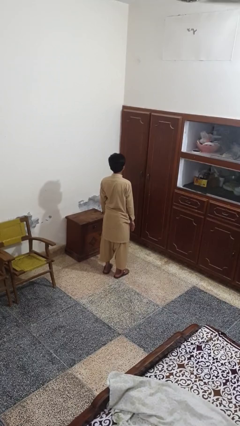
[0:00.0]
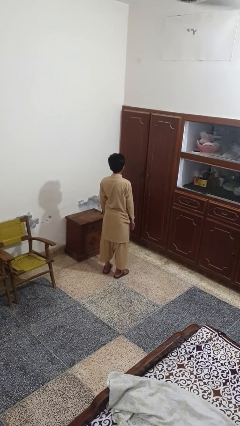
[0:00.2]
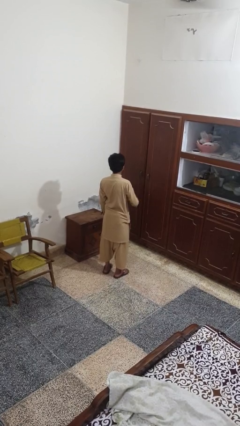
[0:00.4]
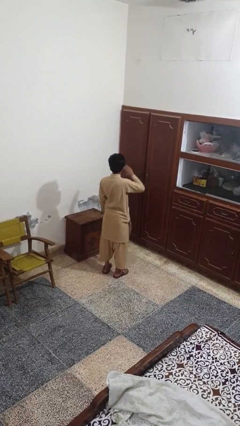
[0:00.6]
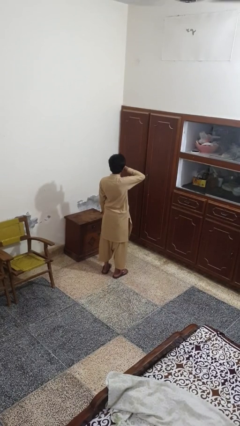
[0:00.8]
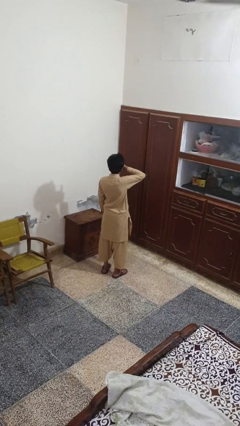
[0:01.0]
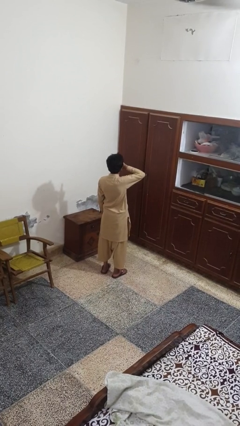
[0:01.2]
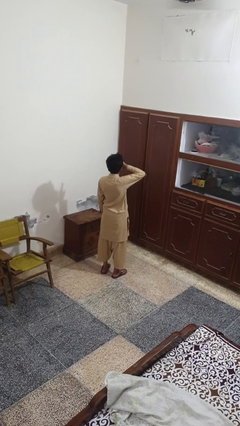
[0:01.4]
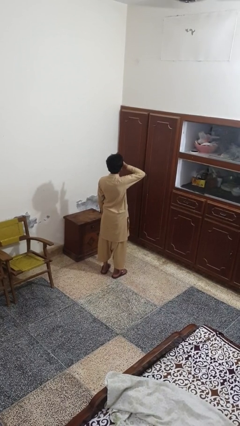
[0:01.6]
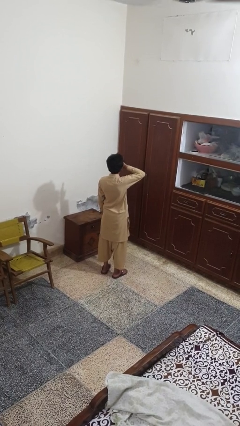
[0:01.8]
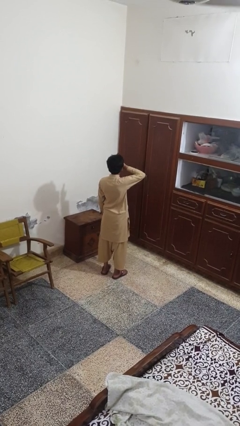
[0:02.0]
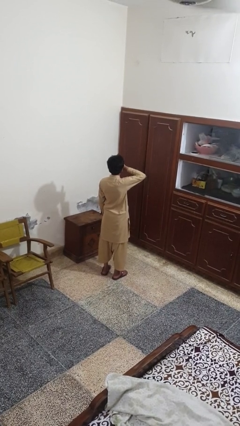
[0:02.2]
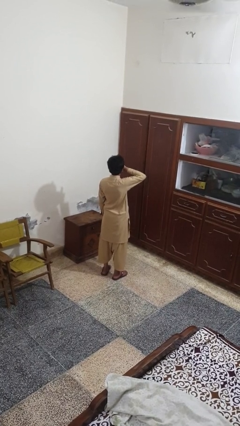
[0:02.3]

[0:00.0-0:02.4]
person yawns

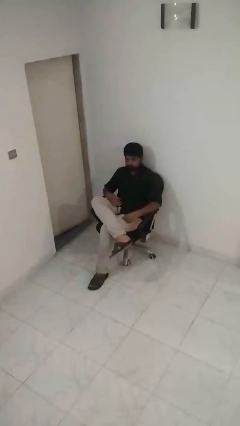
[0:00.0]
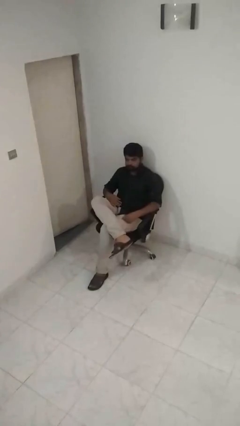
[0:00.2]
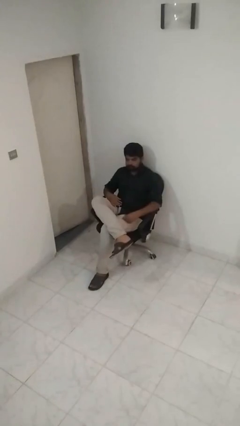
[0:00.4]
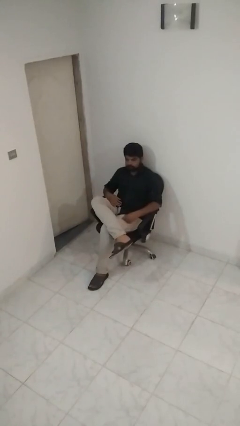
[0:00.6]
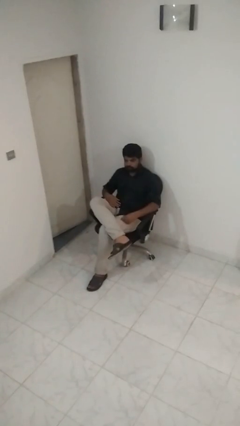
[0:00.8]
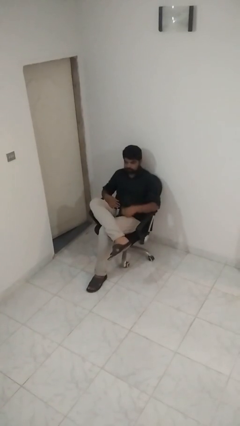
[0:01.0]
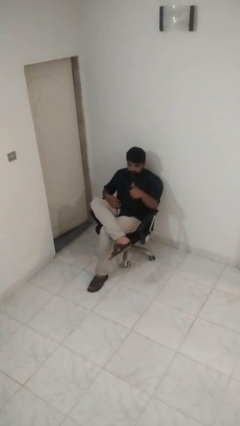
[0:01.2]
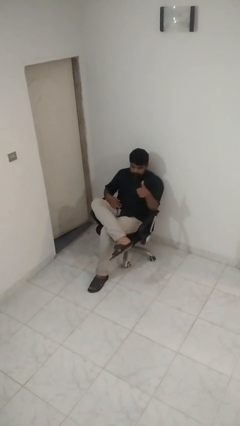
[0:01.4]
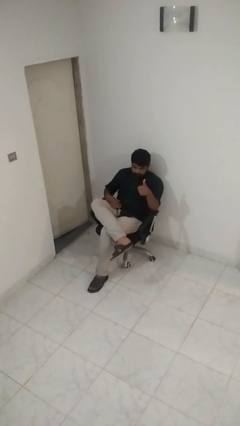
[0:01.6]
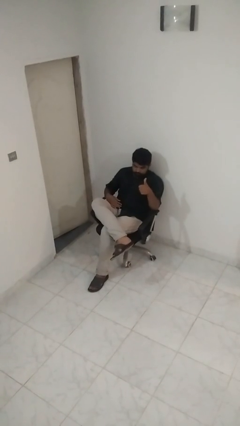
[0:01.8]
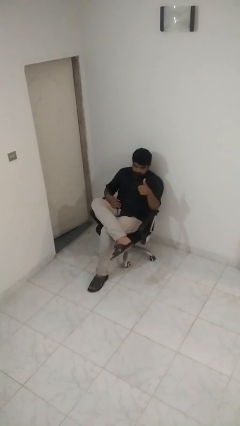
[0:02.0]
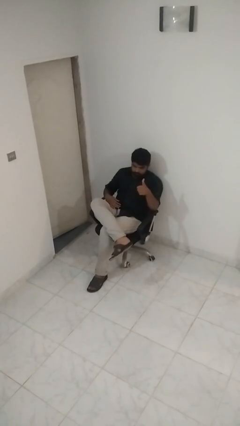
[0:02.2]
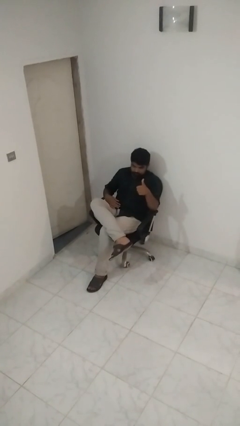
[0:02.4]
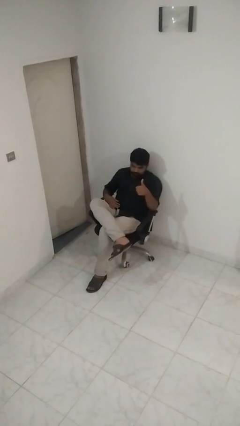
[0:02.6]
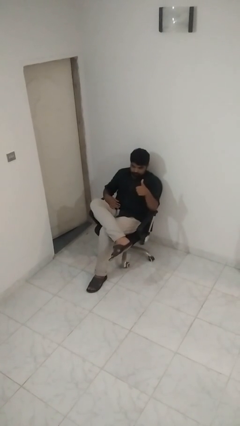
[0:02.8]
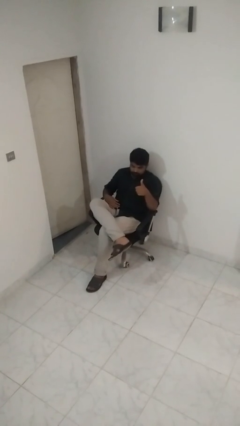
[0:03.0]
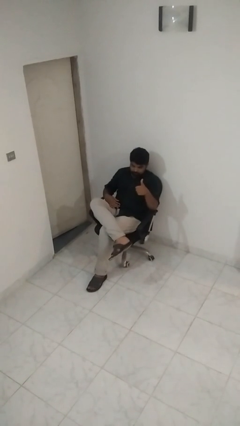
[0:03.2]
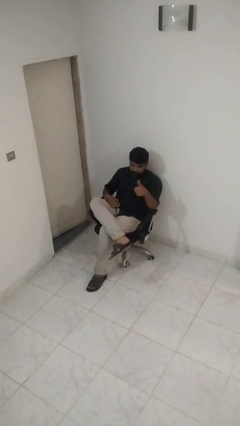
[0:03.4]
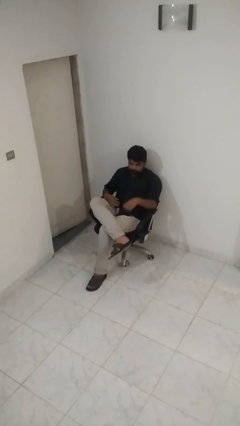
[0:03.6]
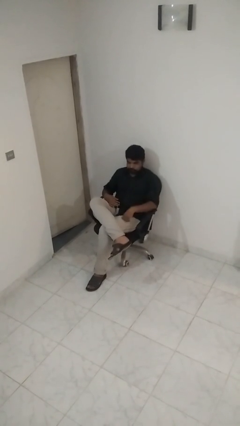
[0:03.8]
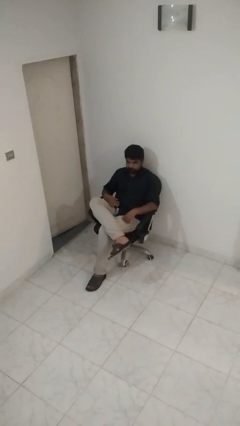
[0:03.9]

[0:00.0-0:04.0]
person gestures thumbs up

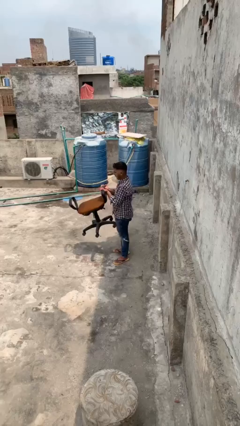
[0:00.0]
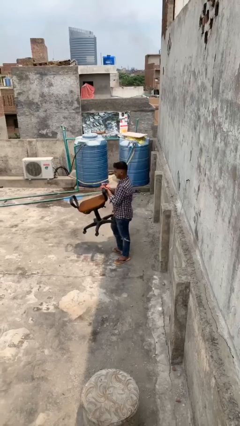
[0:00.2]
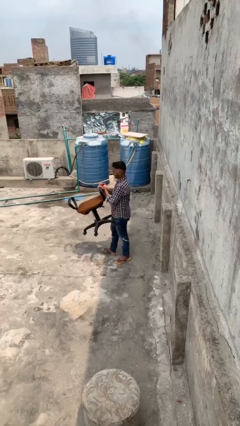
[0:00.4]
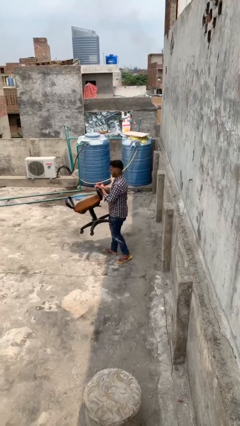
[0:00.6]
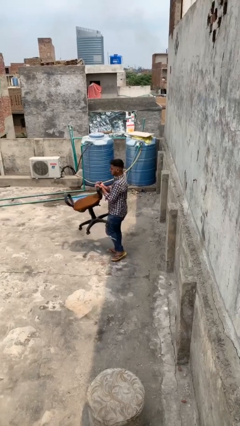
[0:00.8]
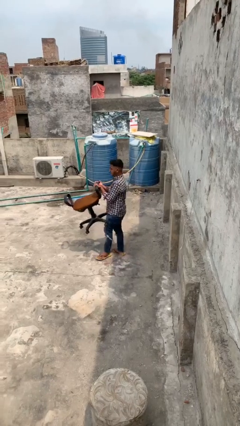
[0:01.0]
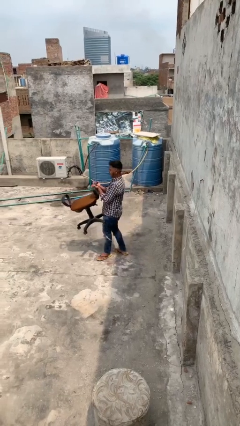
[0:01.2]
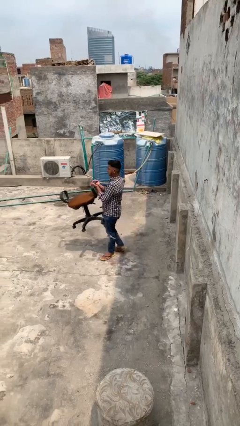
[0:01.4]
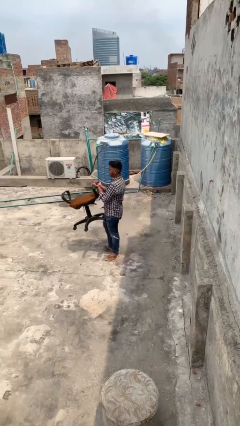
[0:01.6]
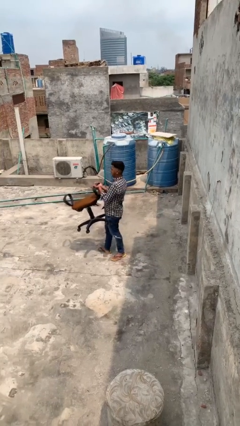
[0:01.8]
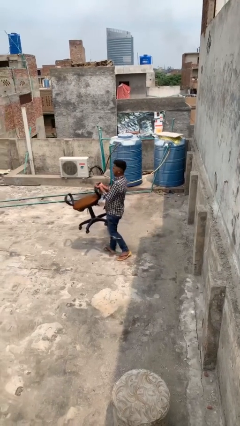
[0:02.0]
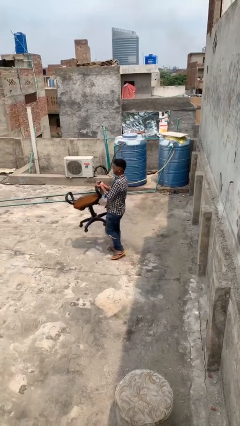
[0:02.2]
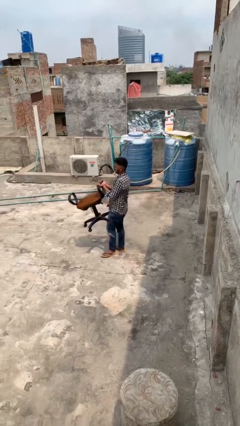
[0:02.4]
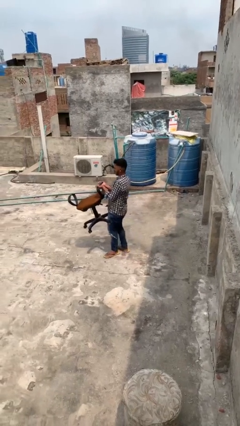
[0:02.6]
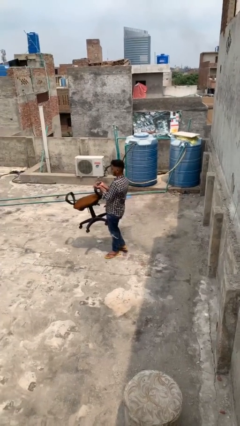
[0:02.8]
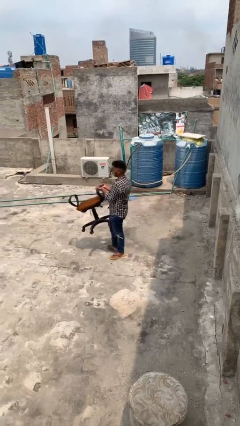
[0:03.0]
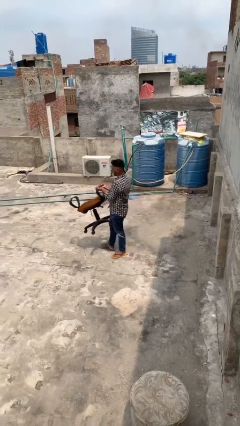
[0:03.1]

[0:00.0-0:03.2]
person carries heavy object

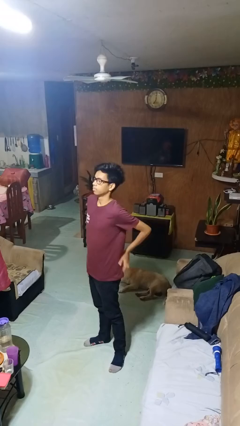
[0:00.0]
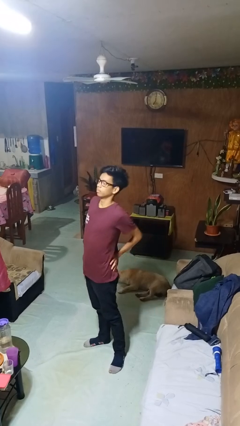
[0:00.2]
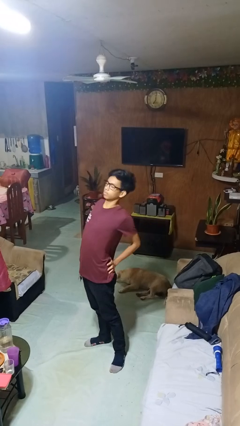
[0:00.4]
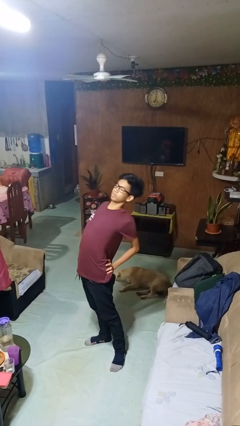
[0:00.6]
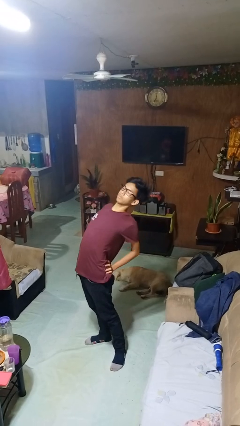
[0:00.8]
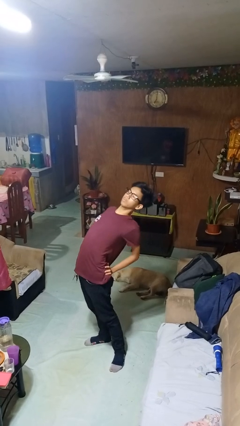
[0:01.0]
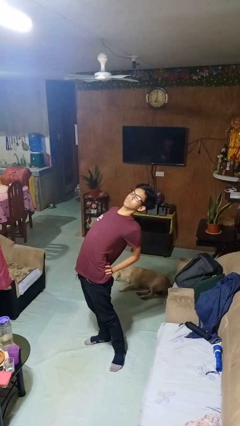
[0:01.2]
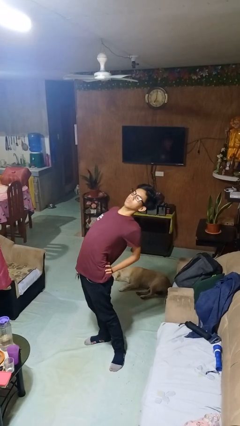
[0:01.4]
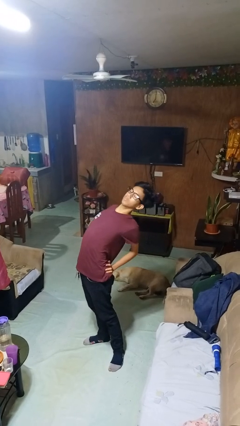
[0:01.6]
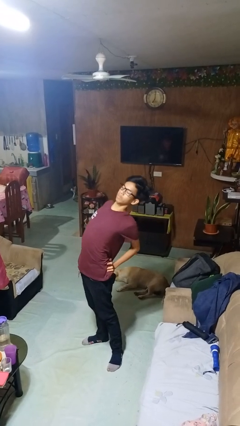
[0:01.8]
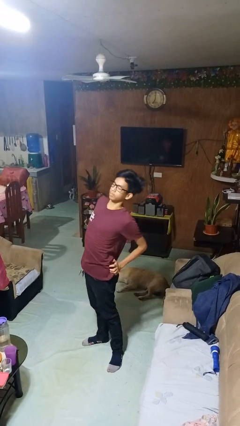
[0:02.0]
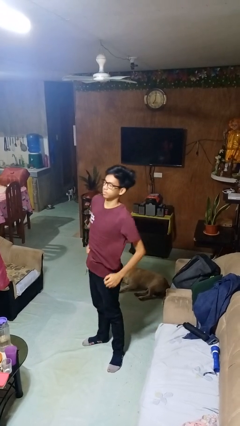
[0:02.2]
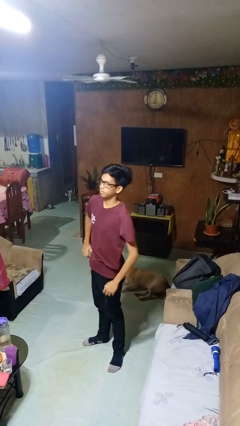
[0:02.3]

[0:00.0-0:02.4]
person stretches back

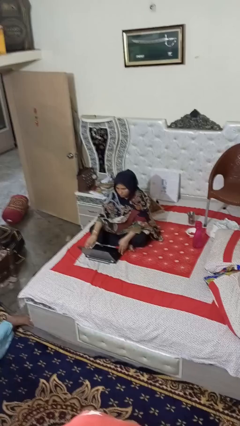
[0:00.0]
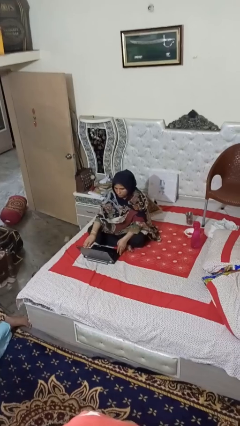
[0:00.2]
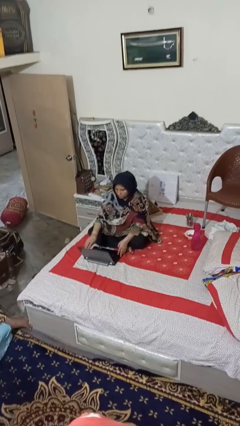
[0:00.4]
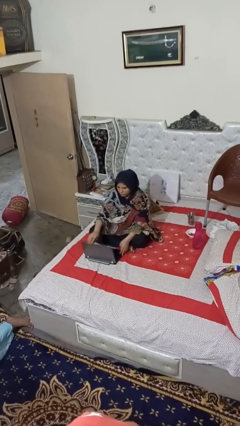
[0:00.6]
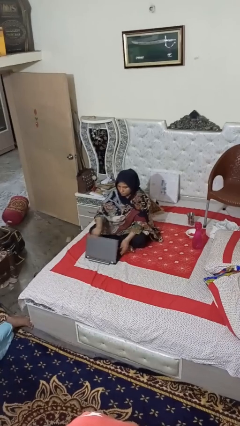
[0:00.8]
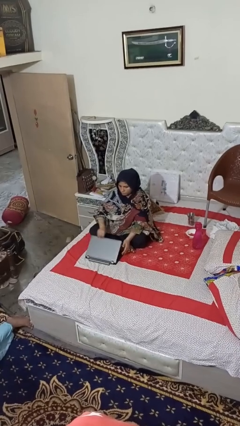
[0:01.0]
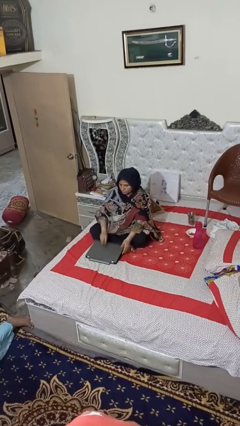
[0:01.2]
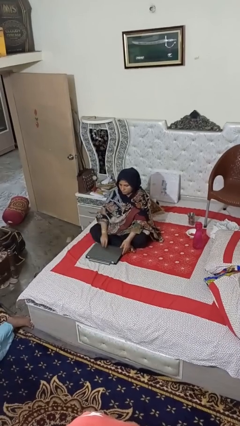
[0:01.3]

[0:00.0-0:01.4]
person closes laptop

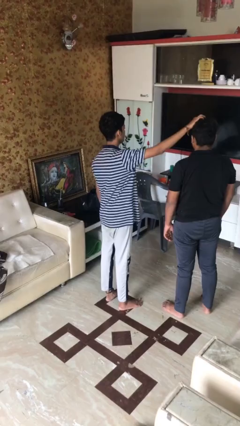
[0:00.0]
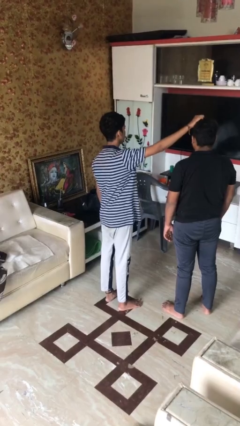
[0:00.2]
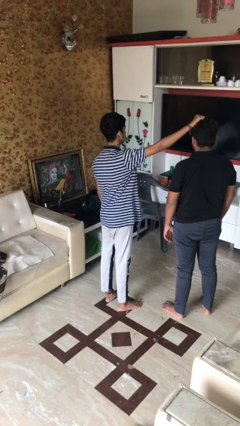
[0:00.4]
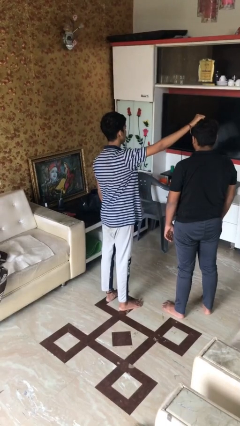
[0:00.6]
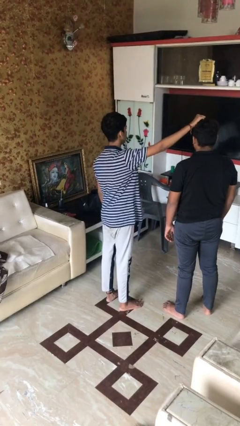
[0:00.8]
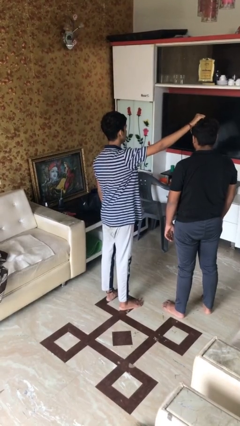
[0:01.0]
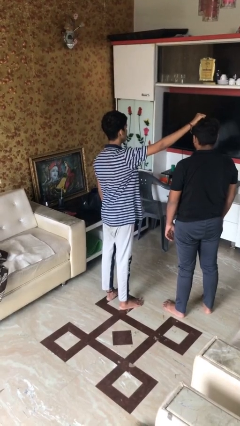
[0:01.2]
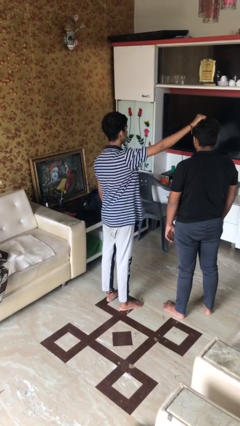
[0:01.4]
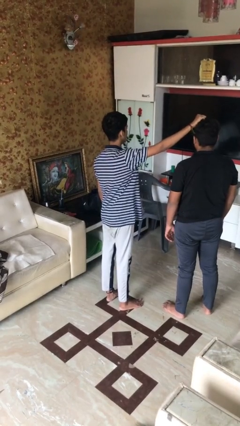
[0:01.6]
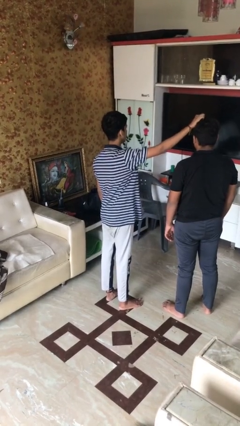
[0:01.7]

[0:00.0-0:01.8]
person grabs person by hair

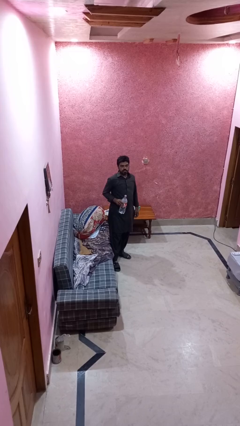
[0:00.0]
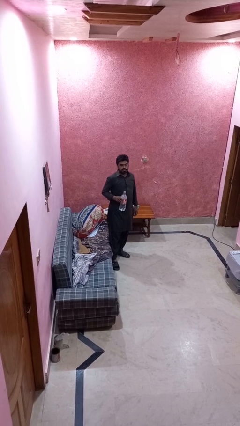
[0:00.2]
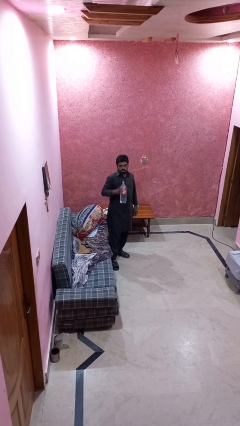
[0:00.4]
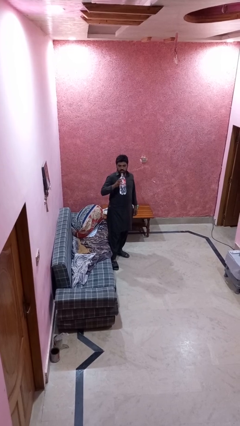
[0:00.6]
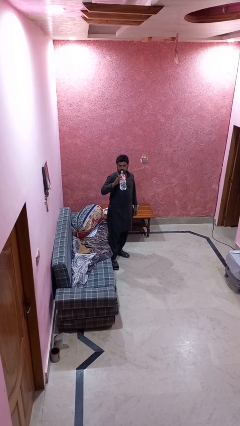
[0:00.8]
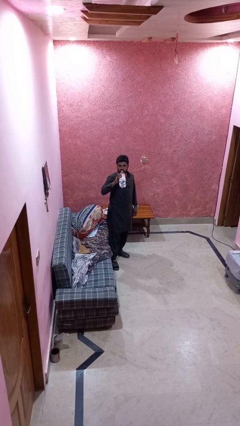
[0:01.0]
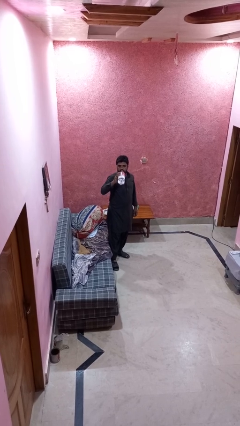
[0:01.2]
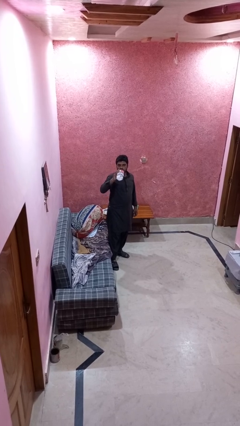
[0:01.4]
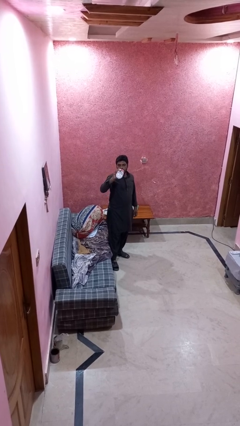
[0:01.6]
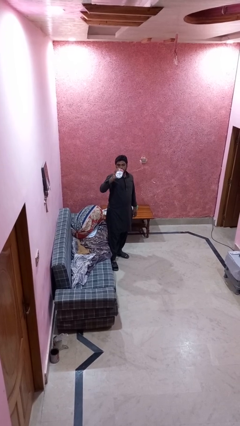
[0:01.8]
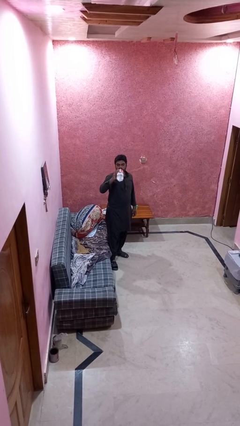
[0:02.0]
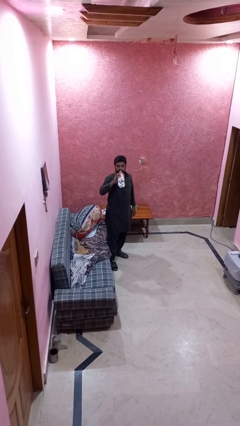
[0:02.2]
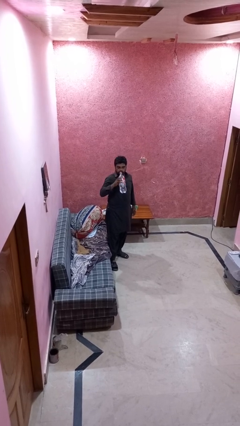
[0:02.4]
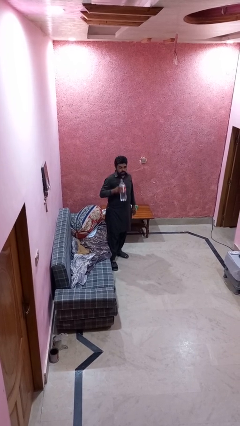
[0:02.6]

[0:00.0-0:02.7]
person drinks from bottle
